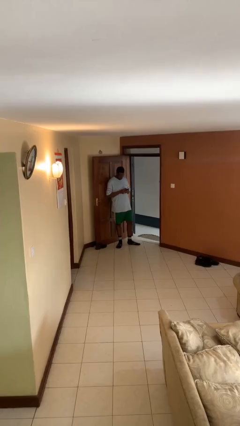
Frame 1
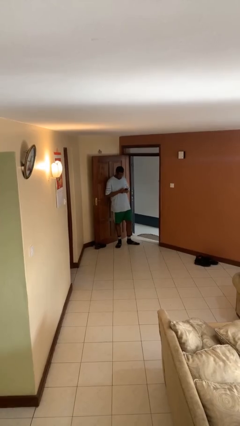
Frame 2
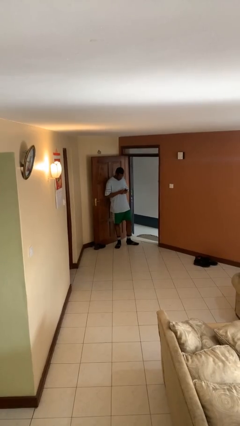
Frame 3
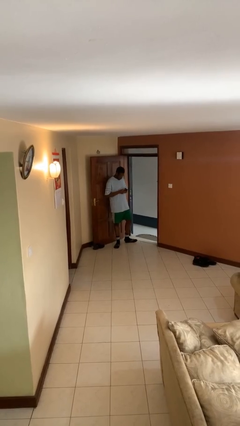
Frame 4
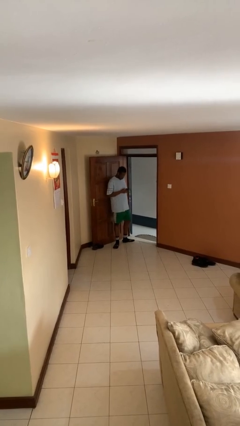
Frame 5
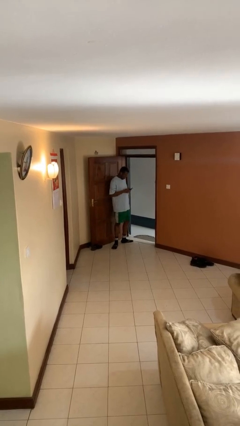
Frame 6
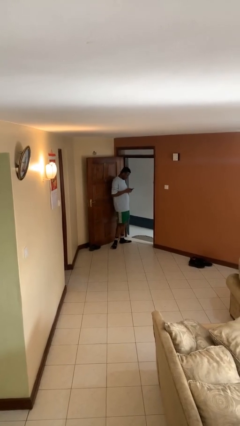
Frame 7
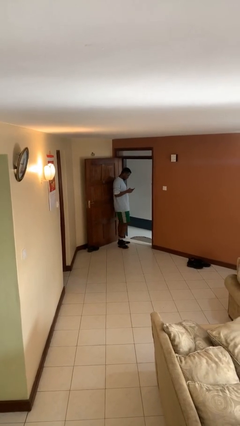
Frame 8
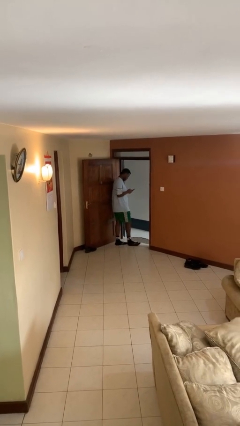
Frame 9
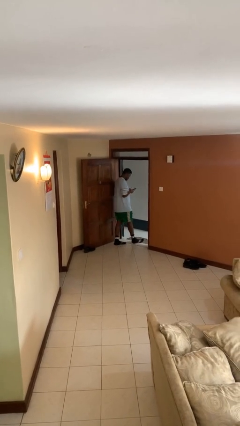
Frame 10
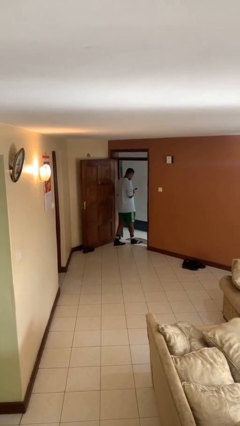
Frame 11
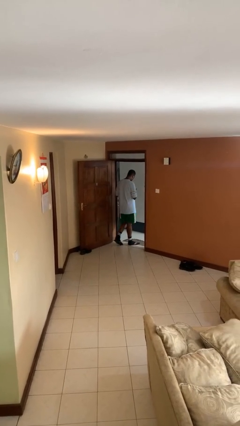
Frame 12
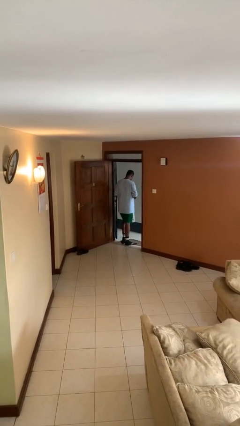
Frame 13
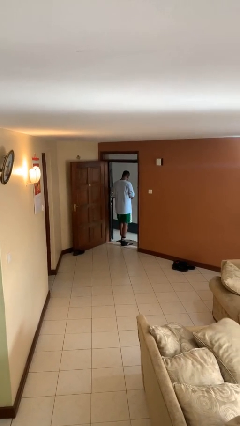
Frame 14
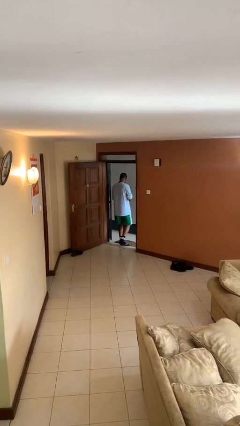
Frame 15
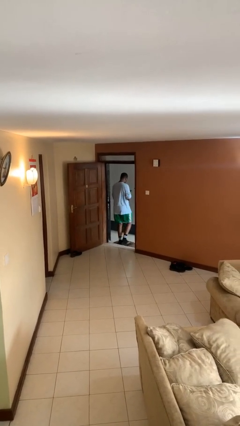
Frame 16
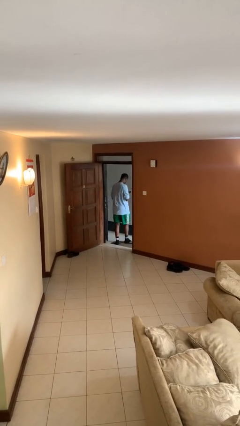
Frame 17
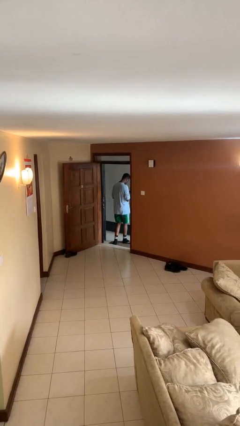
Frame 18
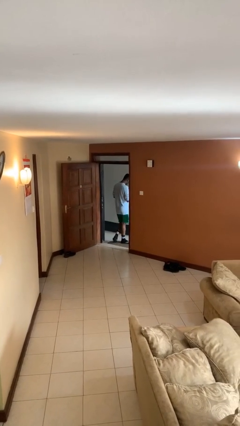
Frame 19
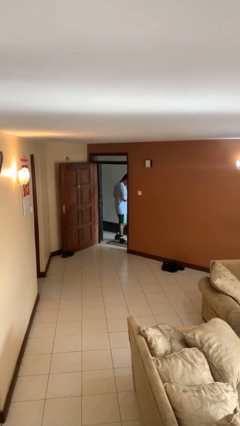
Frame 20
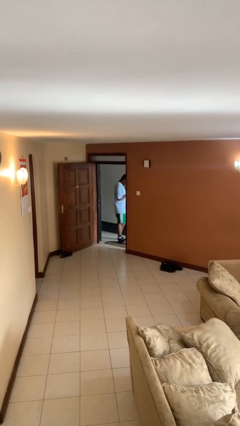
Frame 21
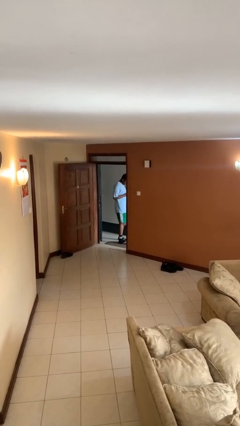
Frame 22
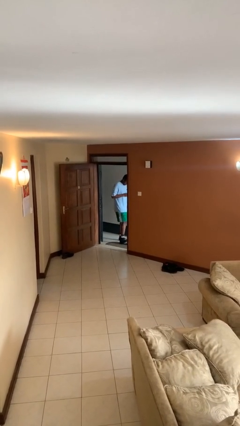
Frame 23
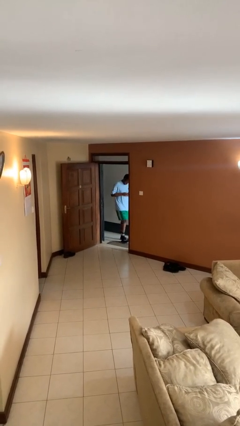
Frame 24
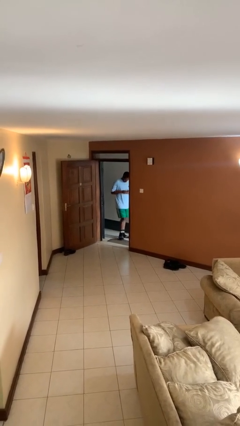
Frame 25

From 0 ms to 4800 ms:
person exits scene through structure

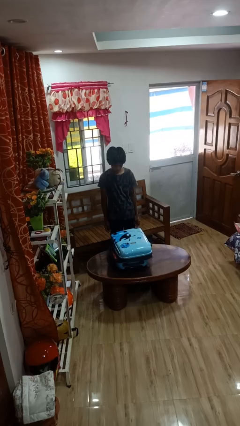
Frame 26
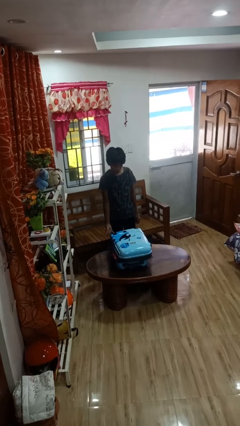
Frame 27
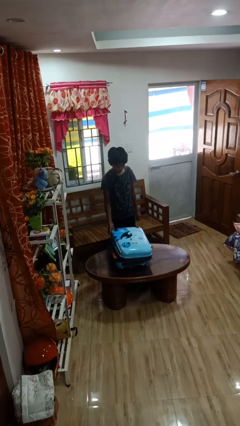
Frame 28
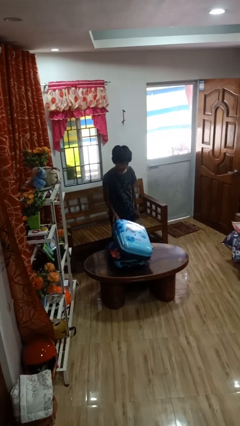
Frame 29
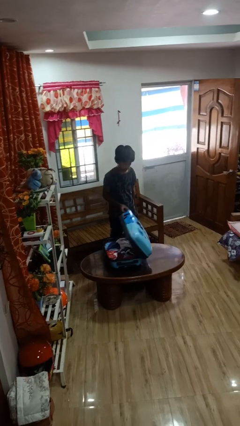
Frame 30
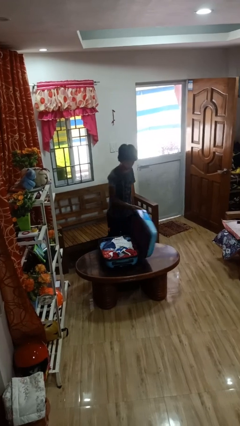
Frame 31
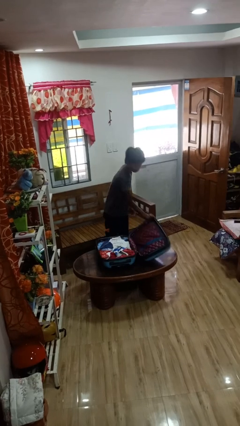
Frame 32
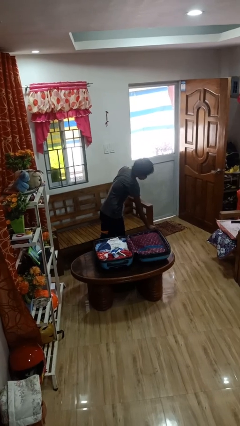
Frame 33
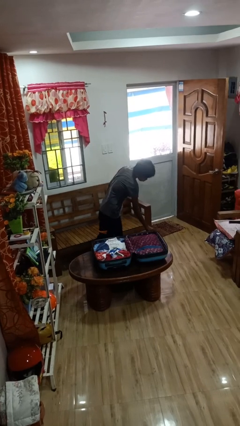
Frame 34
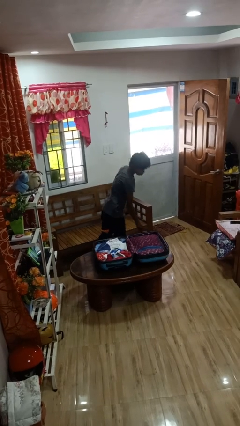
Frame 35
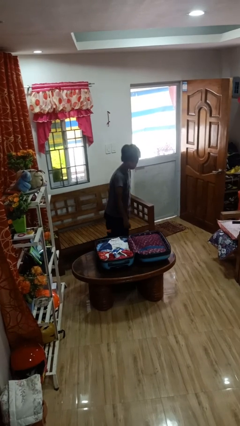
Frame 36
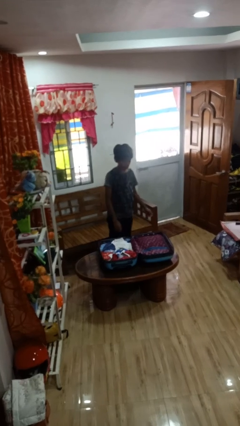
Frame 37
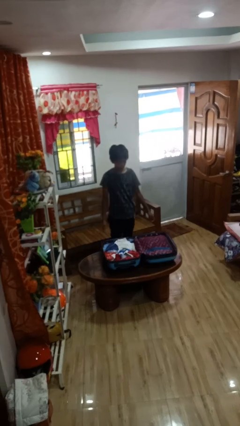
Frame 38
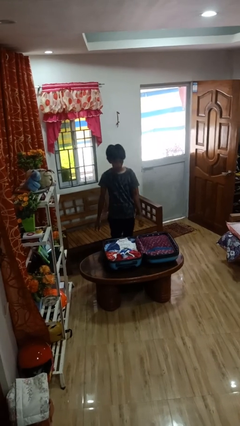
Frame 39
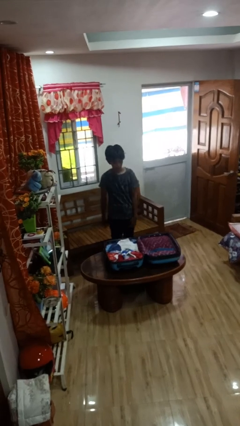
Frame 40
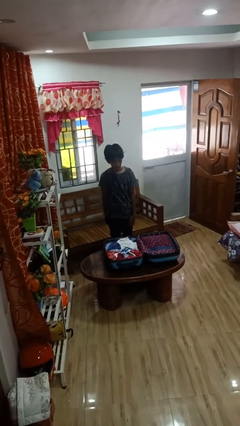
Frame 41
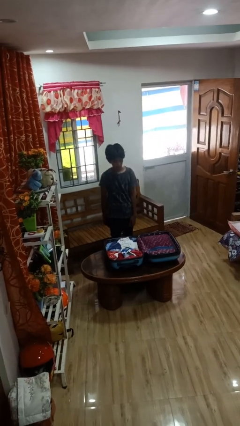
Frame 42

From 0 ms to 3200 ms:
person opens suitcase

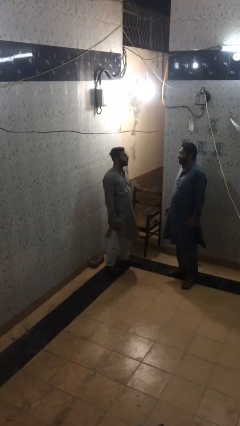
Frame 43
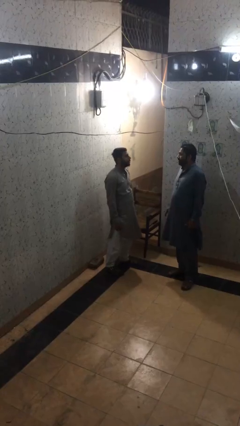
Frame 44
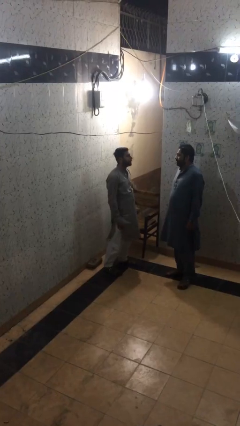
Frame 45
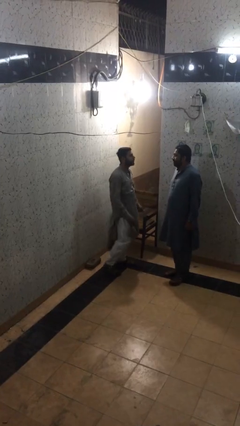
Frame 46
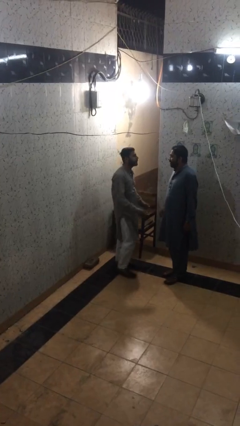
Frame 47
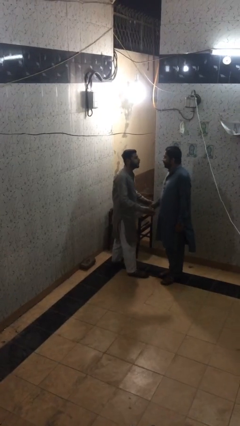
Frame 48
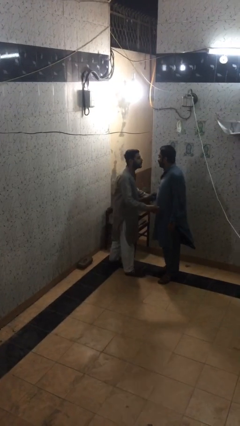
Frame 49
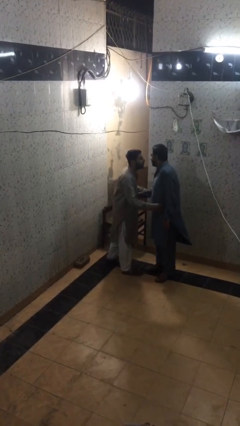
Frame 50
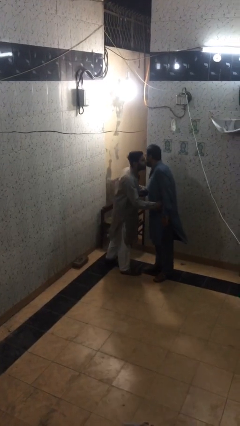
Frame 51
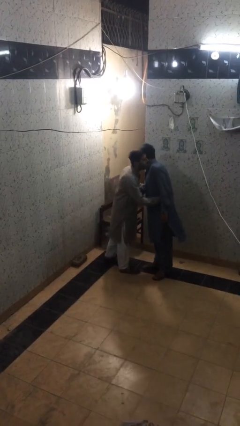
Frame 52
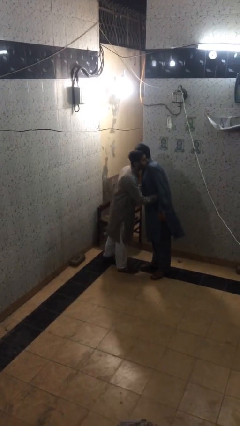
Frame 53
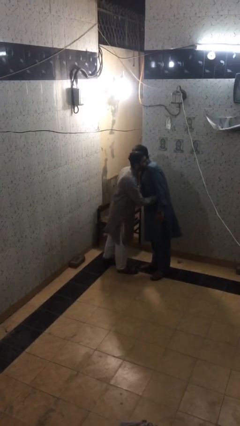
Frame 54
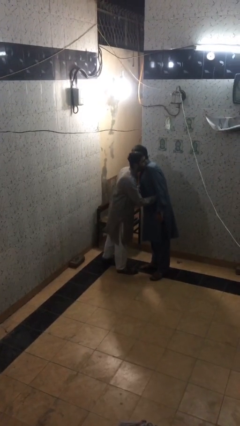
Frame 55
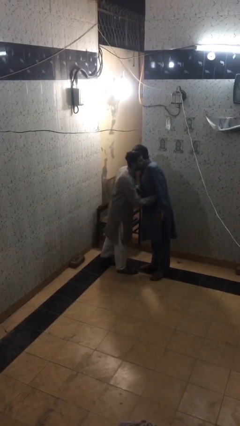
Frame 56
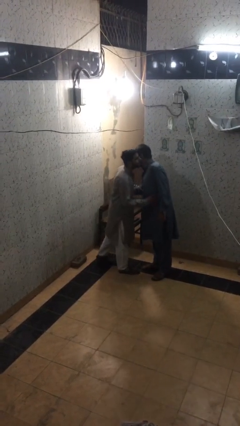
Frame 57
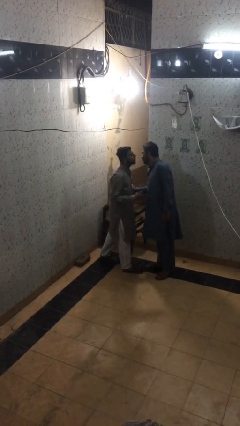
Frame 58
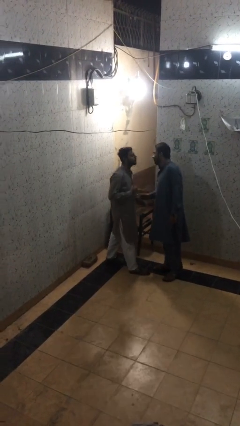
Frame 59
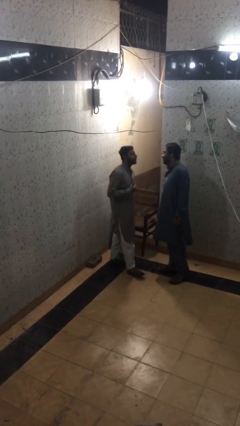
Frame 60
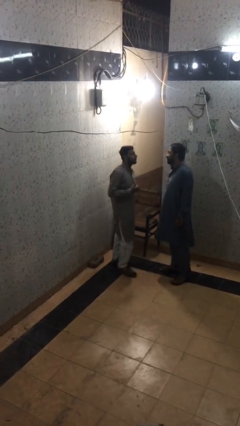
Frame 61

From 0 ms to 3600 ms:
person embraces person

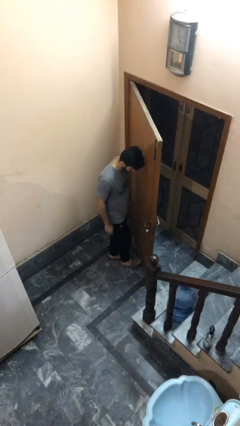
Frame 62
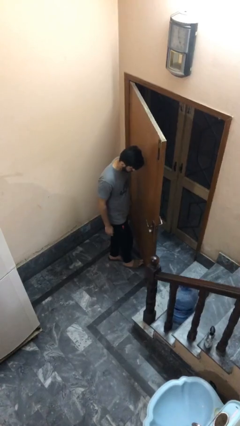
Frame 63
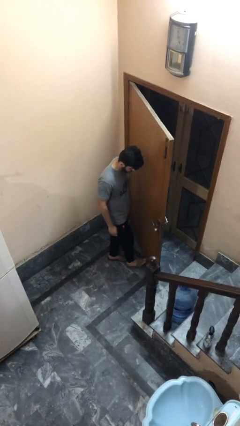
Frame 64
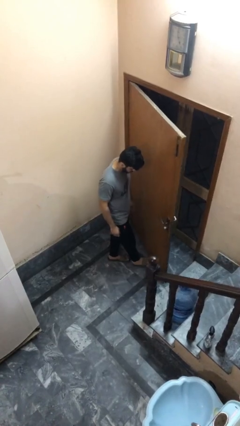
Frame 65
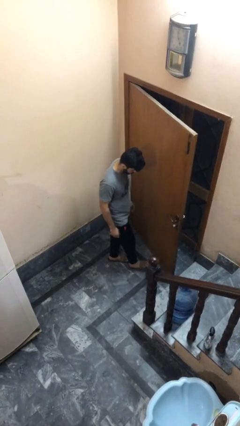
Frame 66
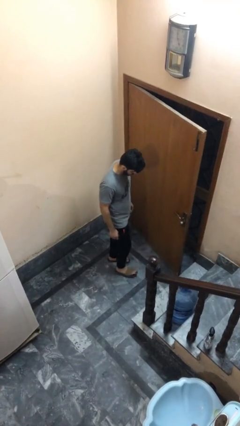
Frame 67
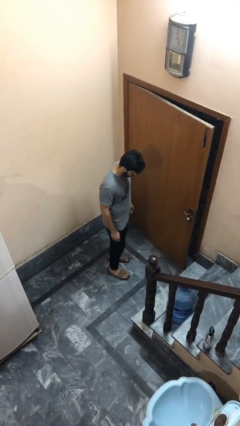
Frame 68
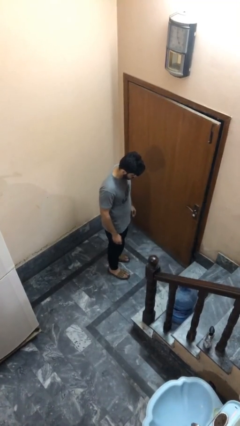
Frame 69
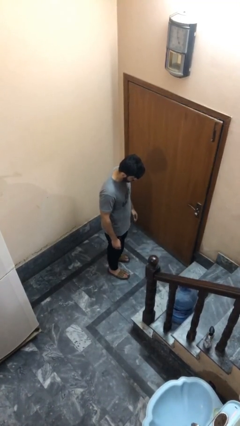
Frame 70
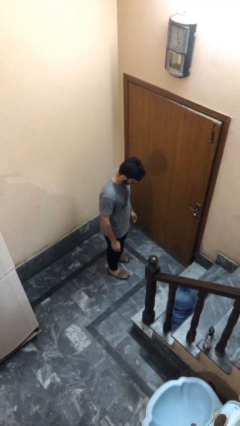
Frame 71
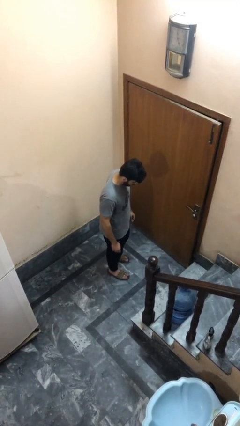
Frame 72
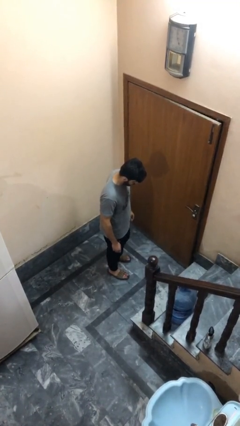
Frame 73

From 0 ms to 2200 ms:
person closes door with foot

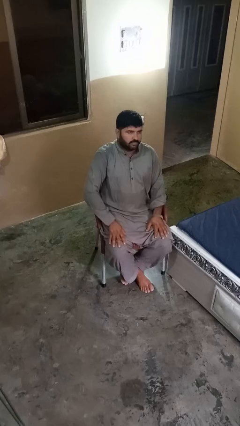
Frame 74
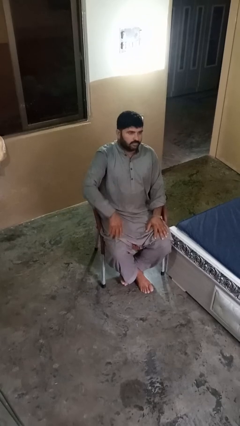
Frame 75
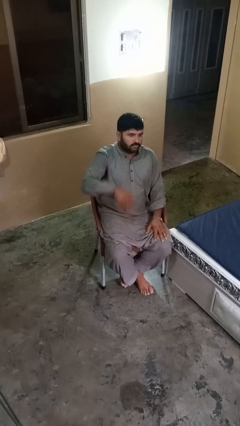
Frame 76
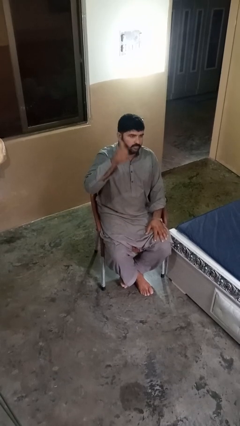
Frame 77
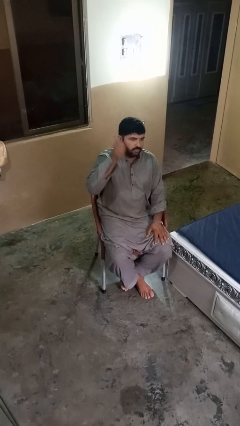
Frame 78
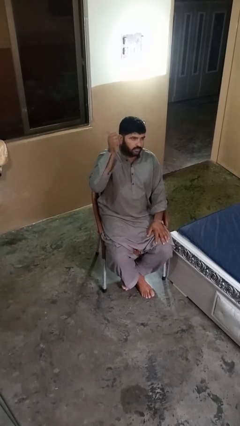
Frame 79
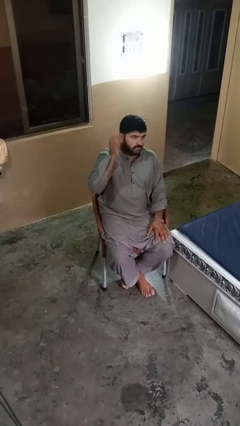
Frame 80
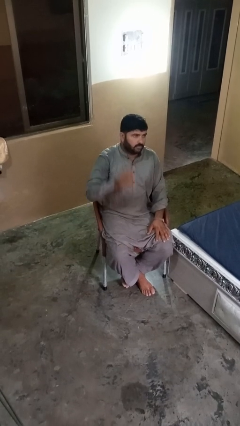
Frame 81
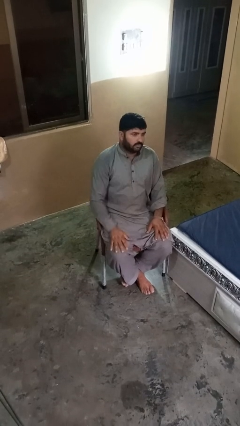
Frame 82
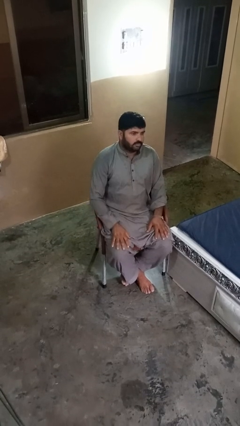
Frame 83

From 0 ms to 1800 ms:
person gestures behind me

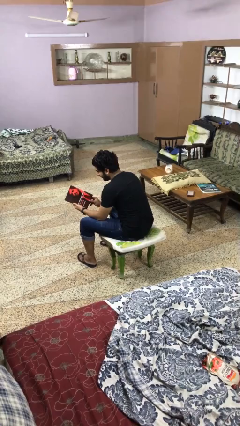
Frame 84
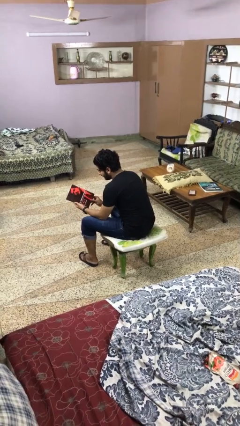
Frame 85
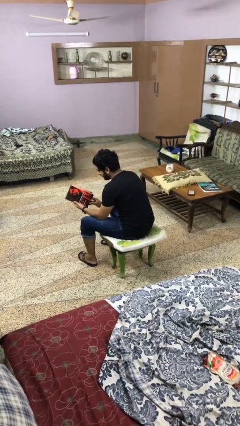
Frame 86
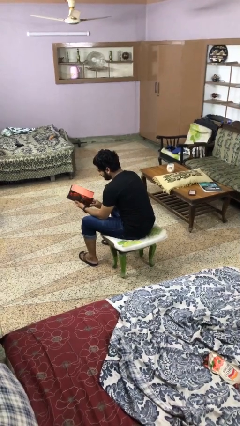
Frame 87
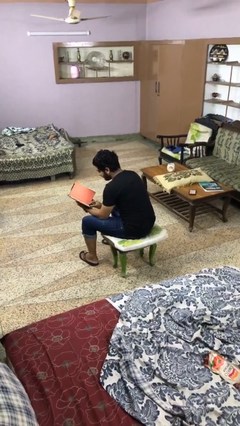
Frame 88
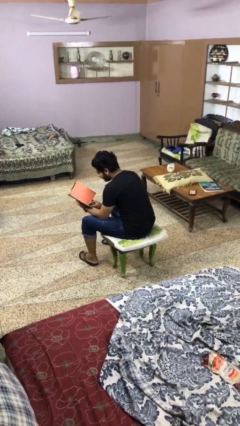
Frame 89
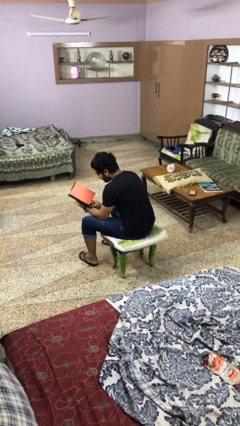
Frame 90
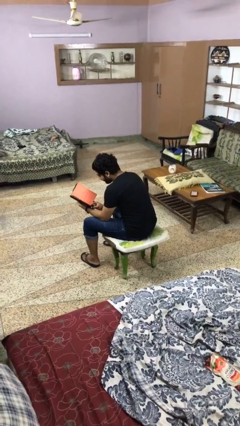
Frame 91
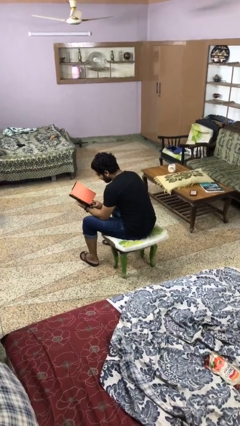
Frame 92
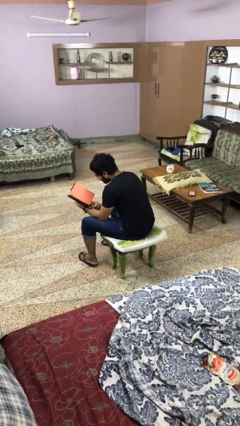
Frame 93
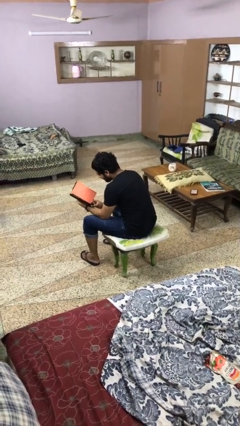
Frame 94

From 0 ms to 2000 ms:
person reads magazine
